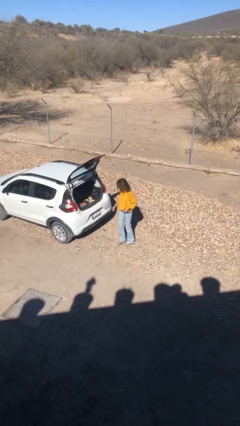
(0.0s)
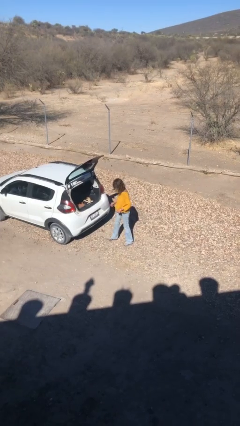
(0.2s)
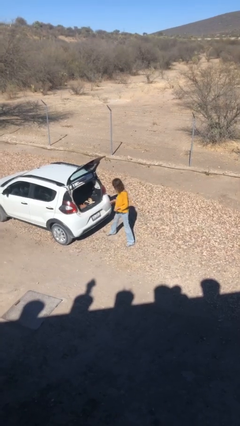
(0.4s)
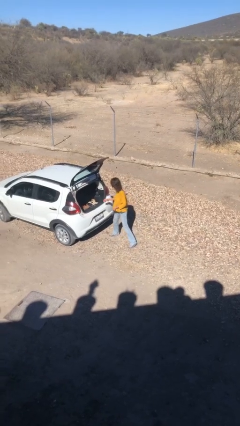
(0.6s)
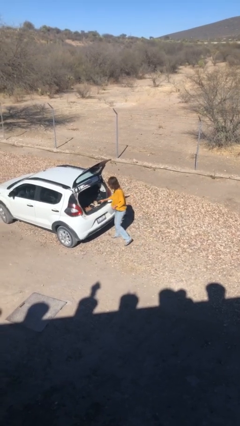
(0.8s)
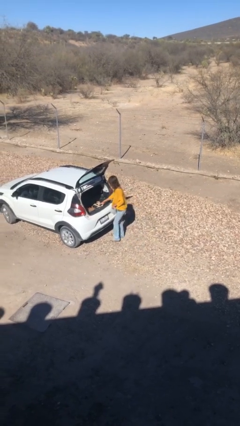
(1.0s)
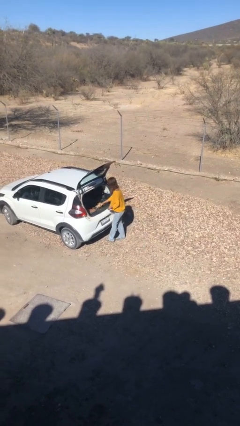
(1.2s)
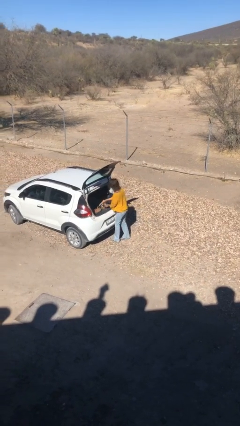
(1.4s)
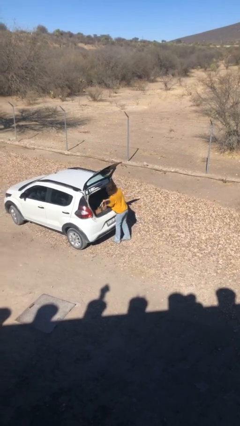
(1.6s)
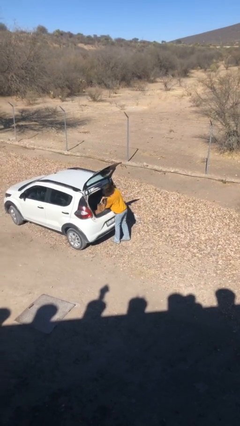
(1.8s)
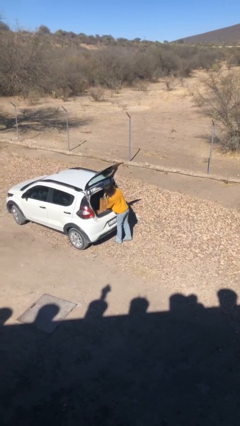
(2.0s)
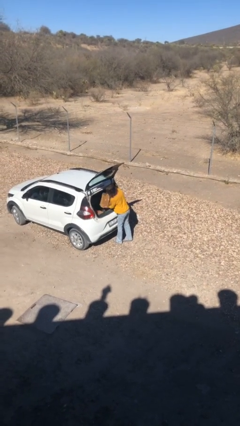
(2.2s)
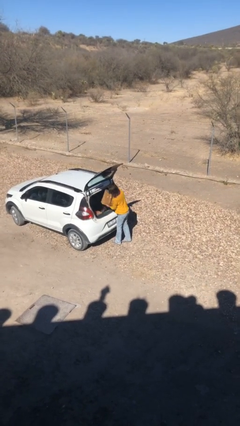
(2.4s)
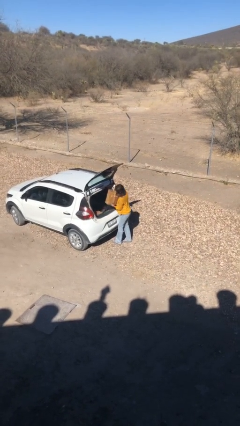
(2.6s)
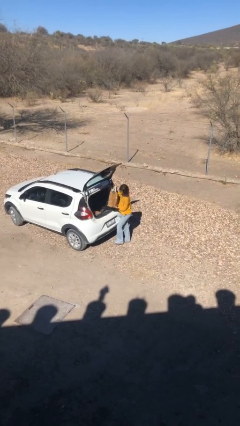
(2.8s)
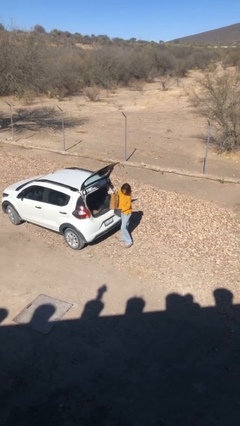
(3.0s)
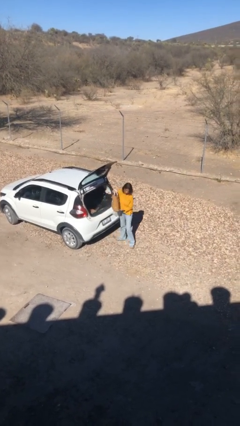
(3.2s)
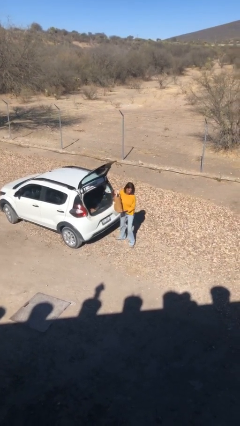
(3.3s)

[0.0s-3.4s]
person unloads car

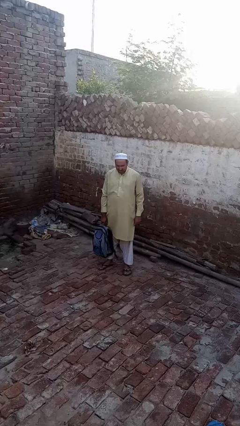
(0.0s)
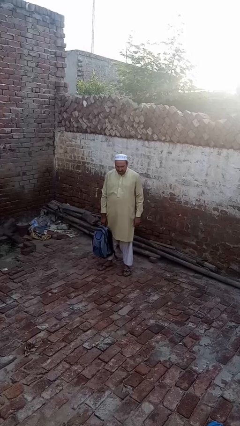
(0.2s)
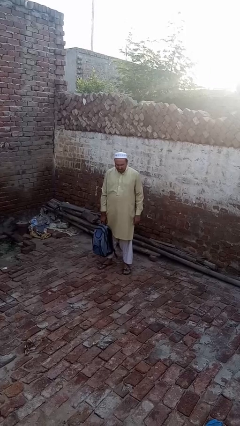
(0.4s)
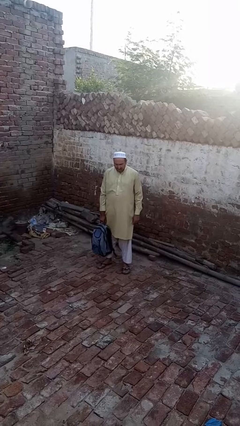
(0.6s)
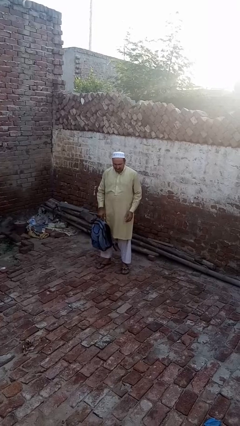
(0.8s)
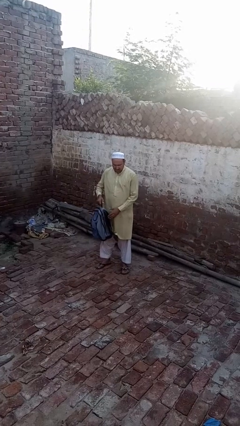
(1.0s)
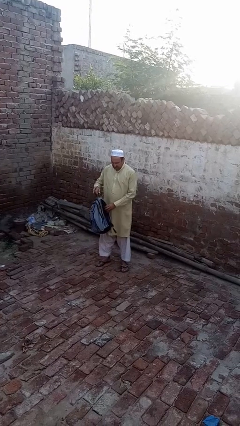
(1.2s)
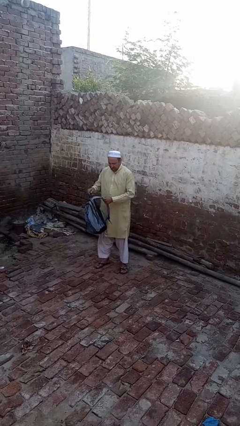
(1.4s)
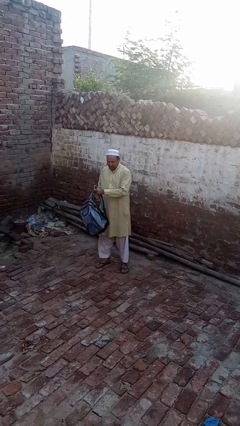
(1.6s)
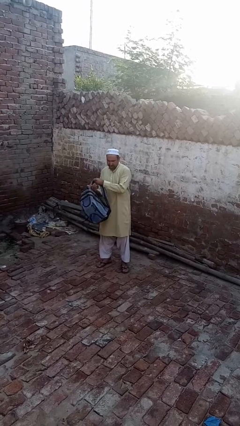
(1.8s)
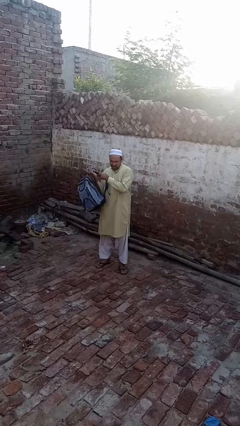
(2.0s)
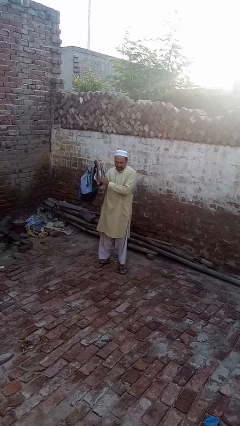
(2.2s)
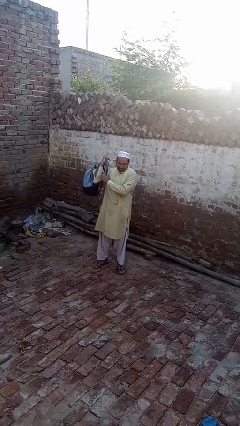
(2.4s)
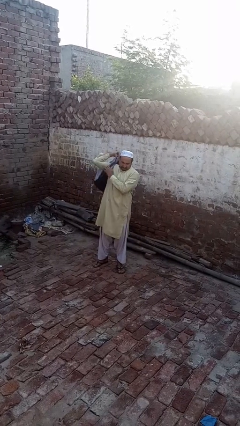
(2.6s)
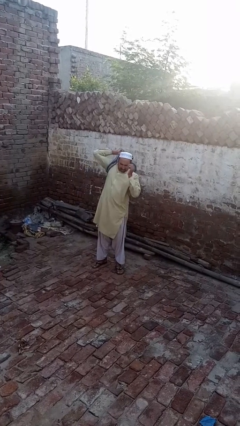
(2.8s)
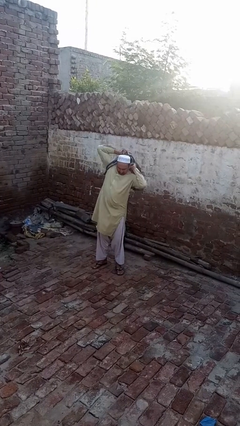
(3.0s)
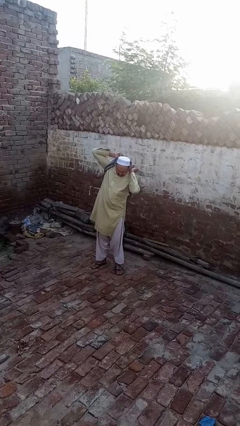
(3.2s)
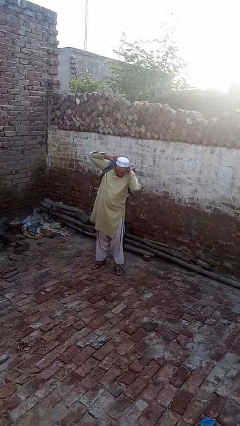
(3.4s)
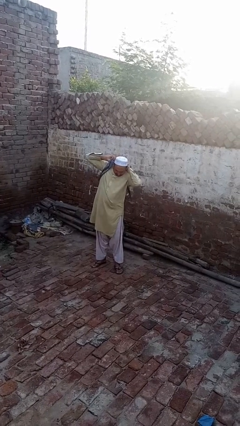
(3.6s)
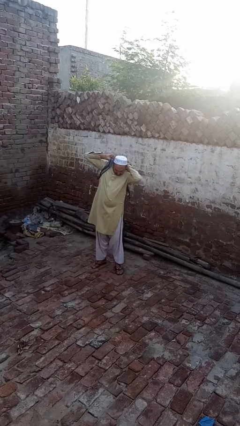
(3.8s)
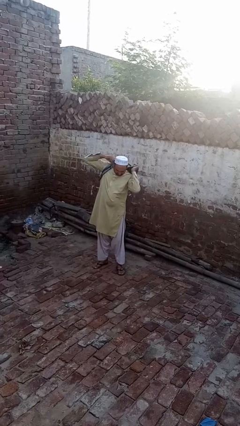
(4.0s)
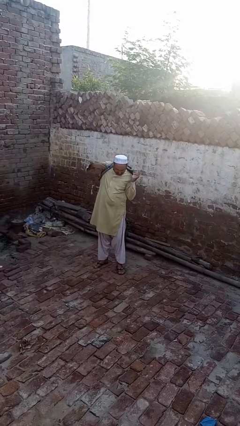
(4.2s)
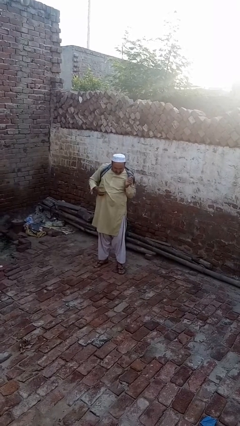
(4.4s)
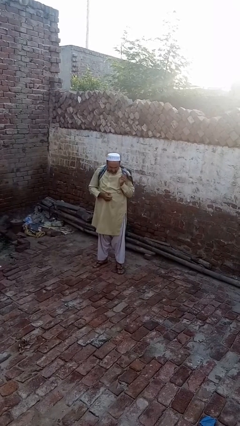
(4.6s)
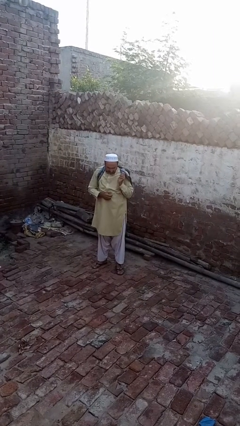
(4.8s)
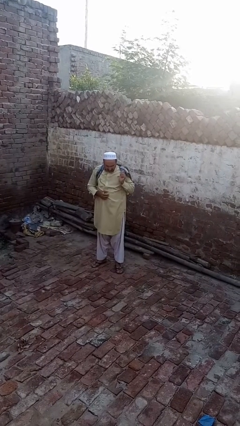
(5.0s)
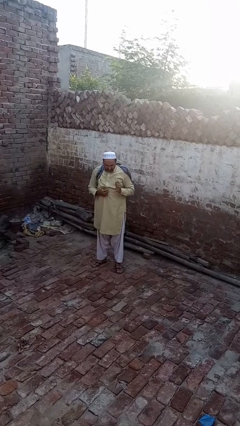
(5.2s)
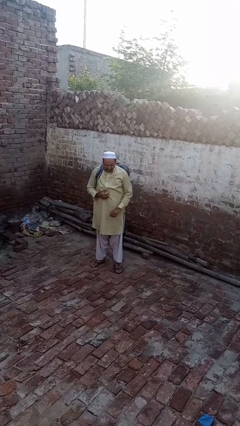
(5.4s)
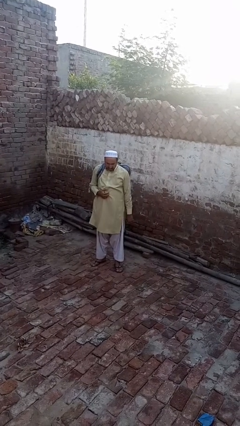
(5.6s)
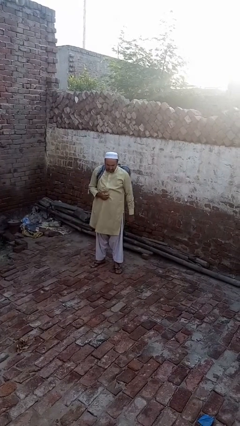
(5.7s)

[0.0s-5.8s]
person puts on backpack

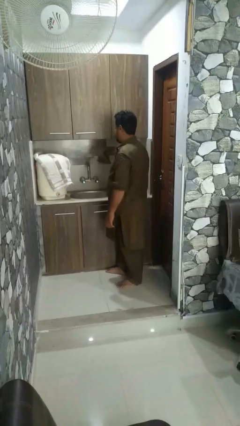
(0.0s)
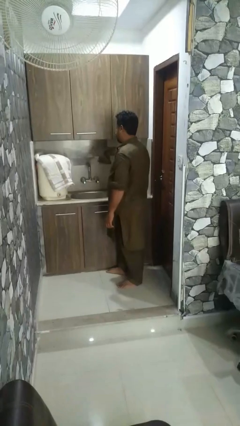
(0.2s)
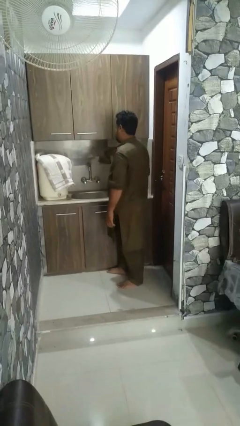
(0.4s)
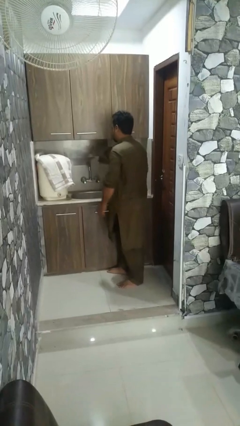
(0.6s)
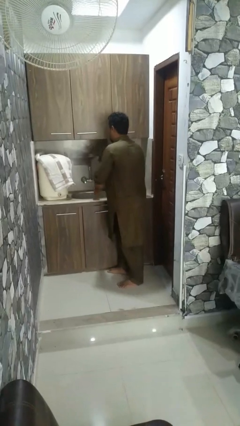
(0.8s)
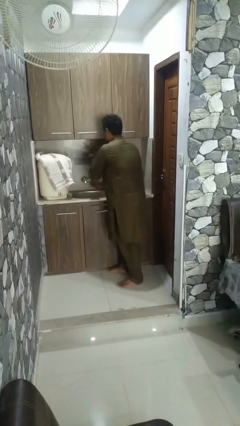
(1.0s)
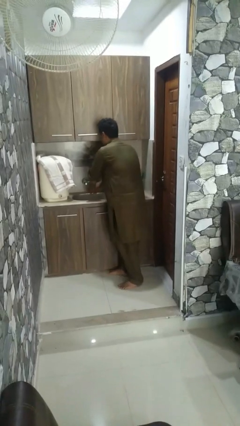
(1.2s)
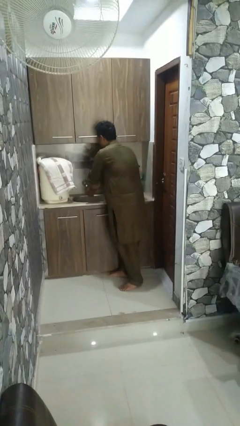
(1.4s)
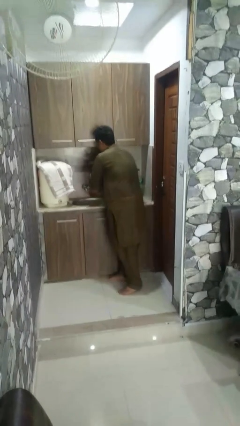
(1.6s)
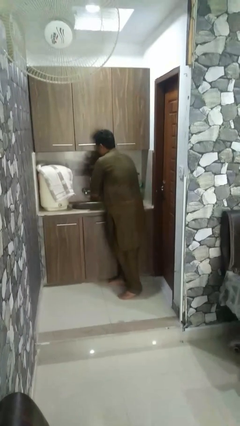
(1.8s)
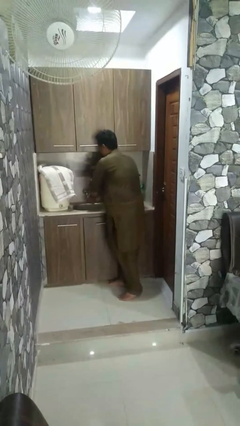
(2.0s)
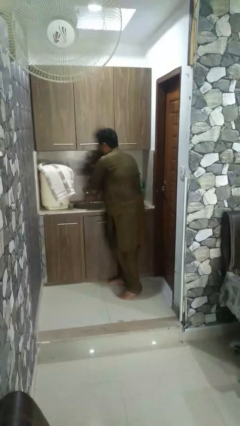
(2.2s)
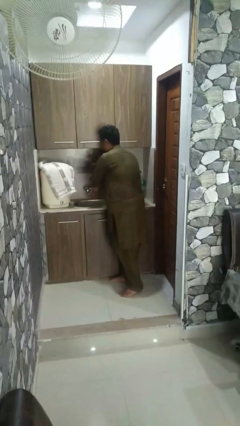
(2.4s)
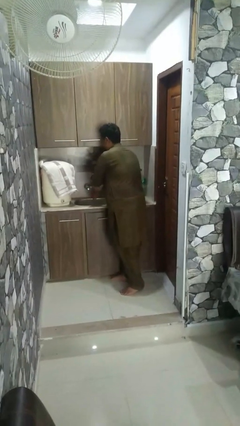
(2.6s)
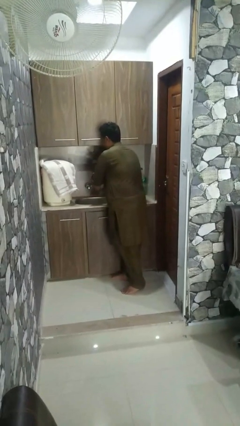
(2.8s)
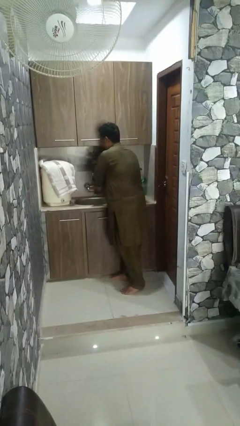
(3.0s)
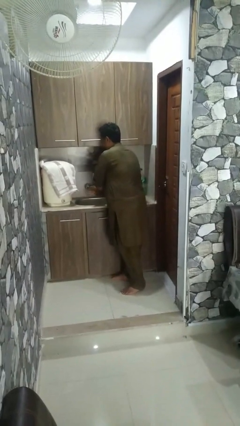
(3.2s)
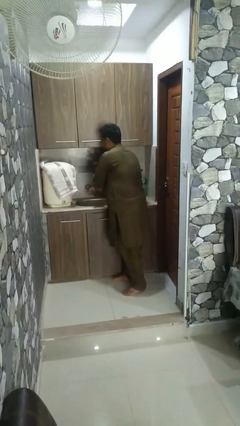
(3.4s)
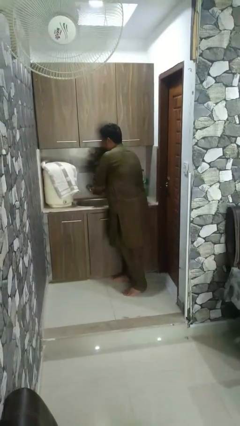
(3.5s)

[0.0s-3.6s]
person washes hands

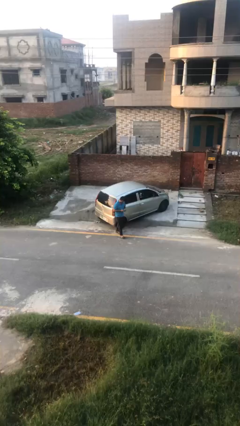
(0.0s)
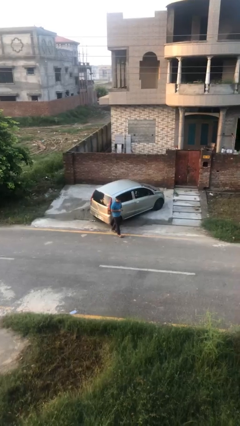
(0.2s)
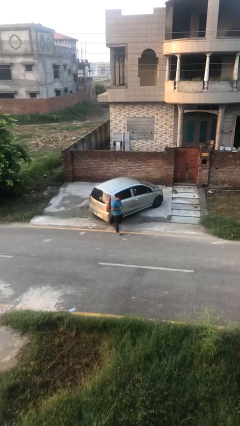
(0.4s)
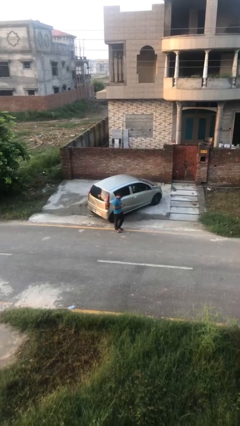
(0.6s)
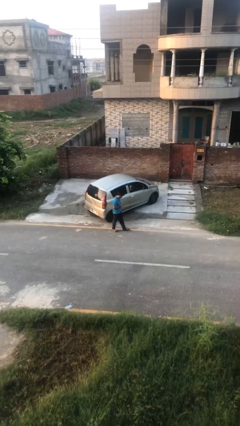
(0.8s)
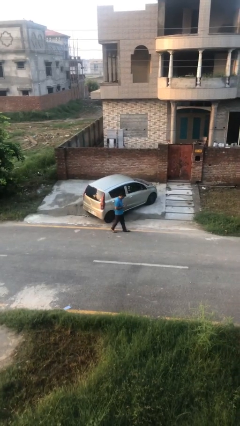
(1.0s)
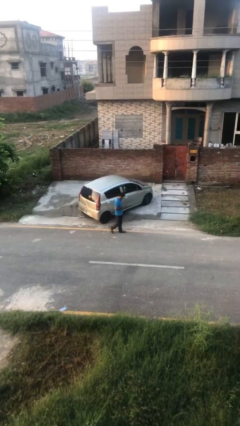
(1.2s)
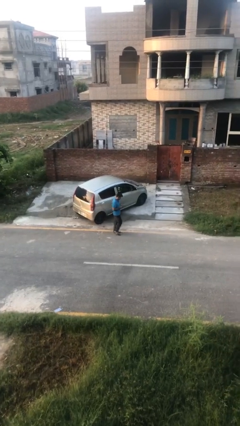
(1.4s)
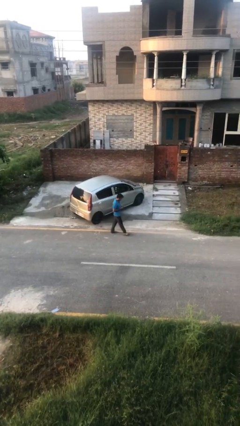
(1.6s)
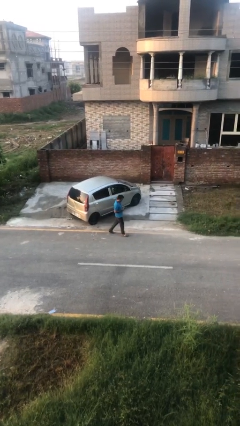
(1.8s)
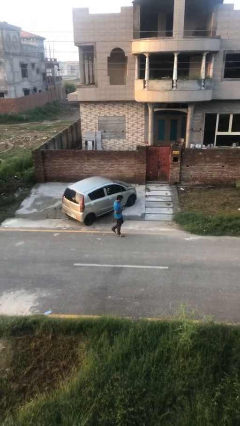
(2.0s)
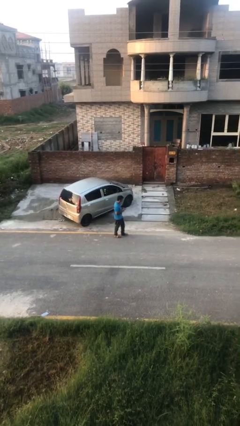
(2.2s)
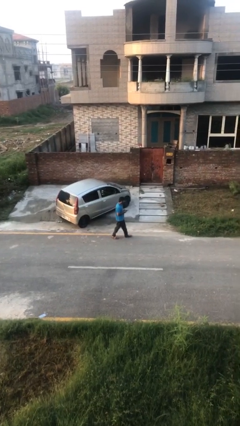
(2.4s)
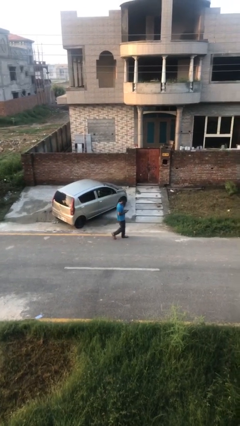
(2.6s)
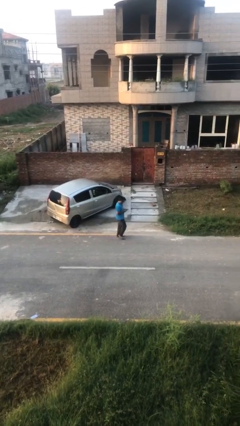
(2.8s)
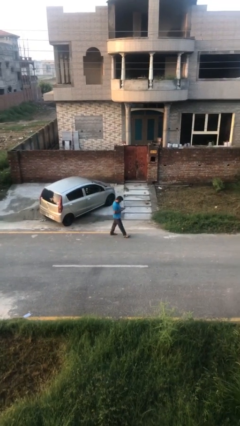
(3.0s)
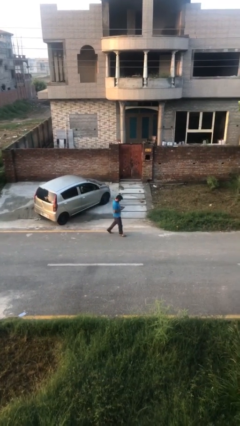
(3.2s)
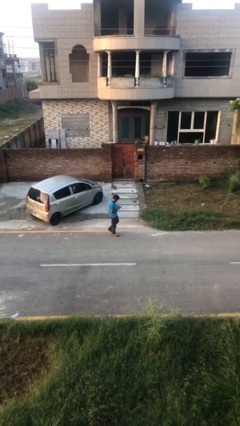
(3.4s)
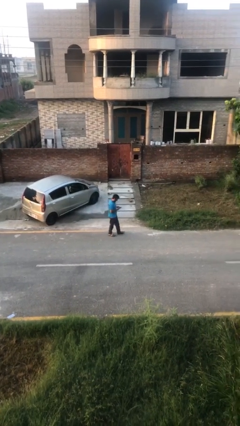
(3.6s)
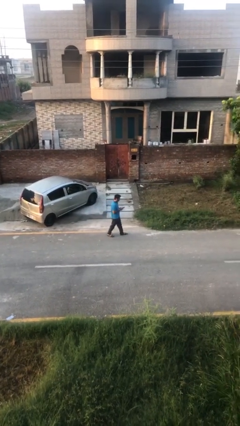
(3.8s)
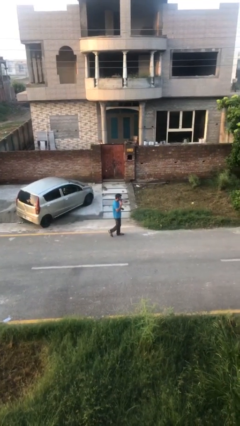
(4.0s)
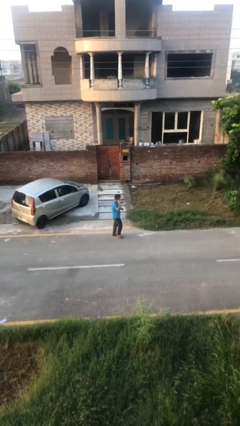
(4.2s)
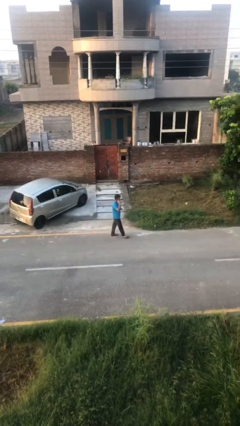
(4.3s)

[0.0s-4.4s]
person texts on phone

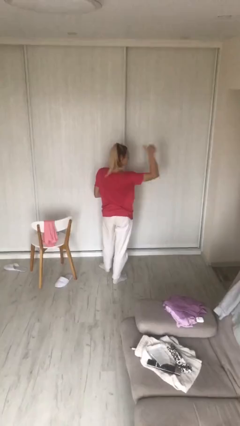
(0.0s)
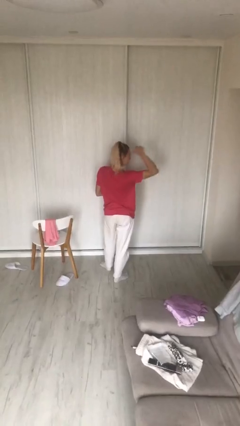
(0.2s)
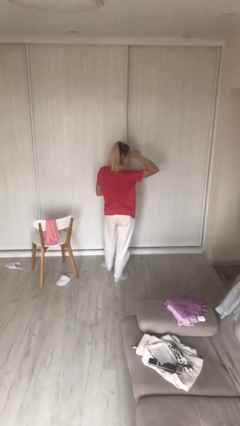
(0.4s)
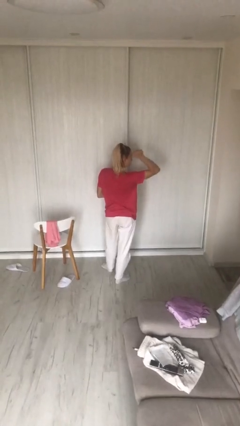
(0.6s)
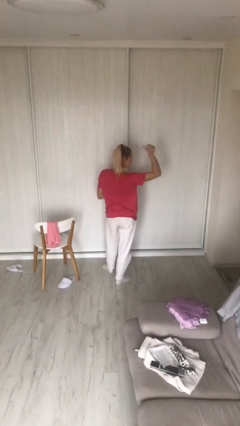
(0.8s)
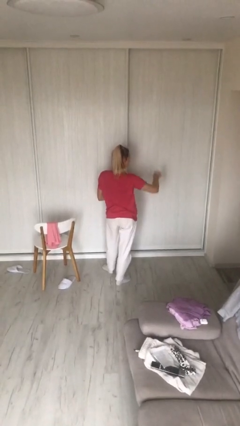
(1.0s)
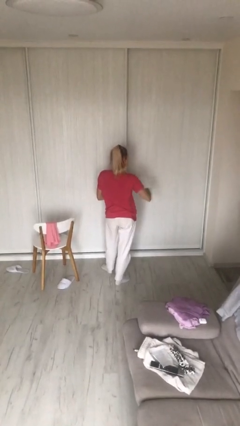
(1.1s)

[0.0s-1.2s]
person gestures behind me
